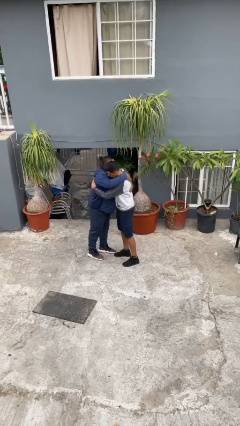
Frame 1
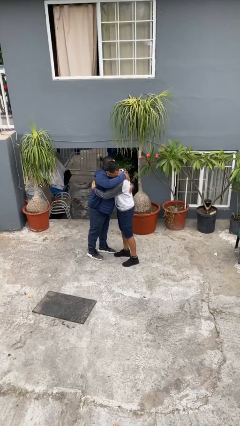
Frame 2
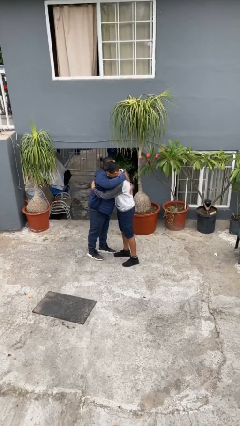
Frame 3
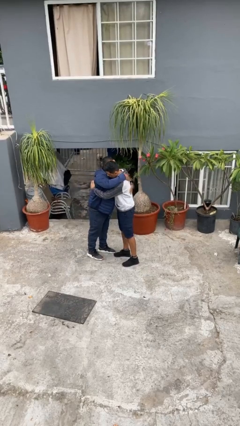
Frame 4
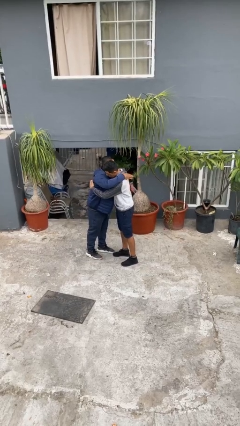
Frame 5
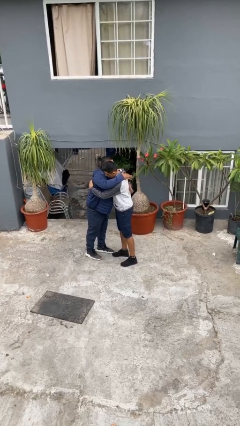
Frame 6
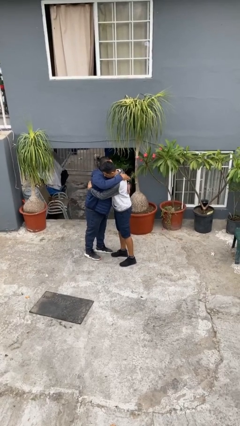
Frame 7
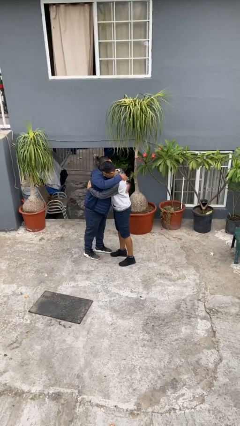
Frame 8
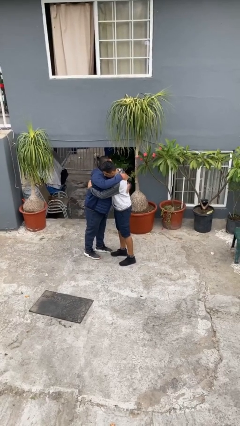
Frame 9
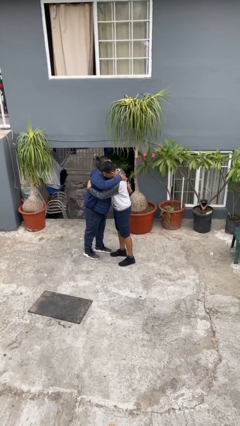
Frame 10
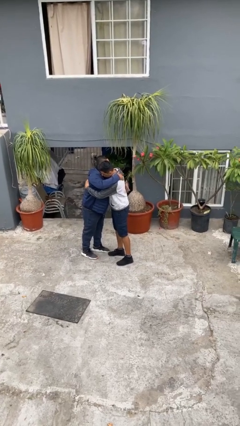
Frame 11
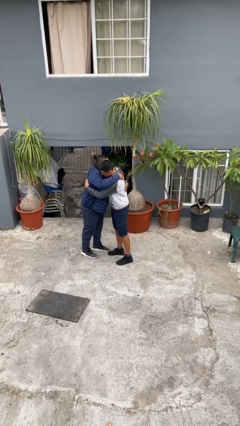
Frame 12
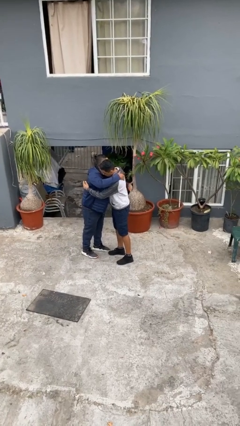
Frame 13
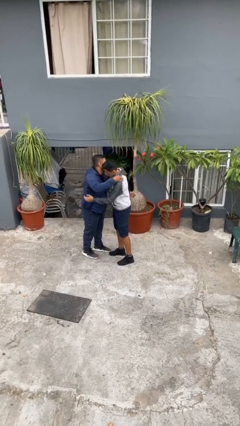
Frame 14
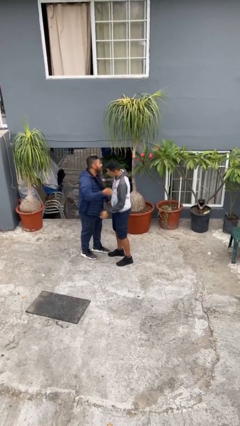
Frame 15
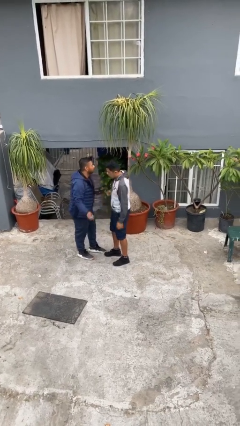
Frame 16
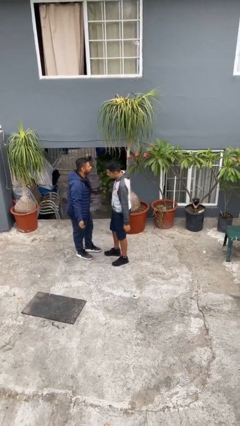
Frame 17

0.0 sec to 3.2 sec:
person embraces person

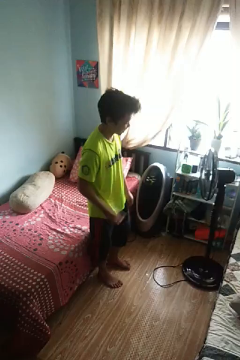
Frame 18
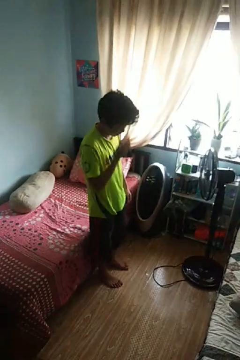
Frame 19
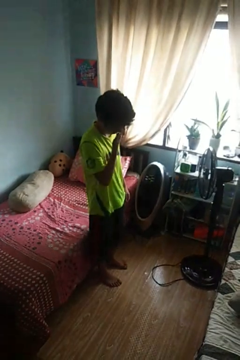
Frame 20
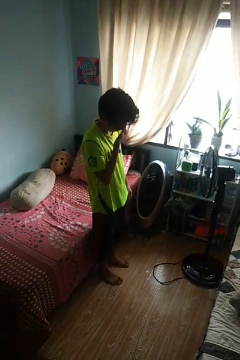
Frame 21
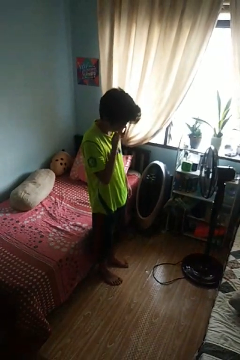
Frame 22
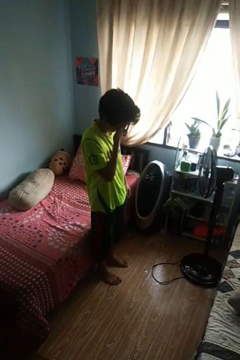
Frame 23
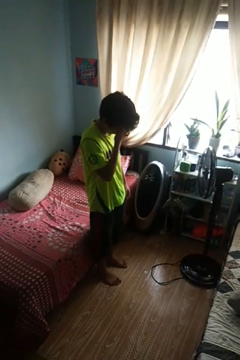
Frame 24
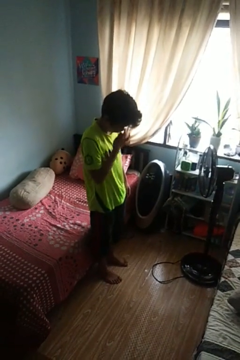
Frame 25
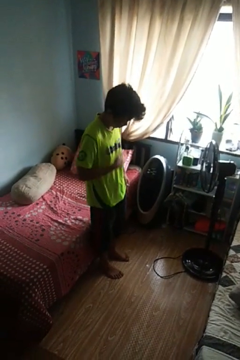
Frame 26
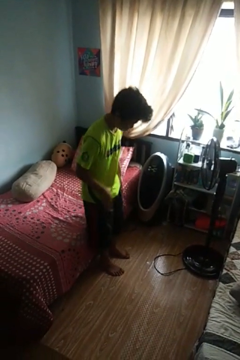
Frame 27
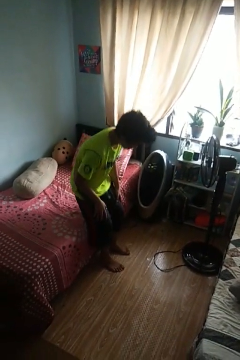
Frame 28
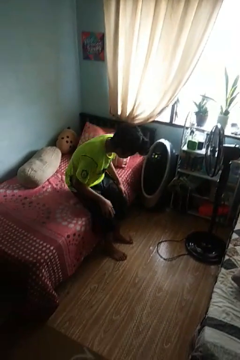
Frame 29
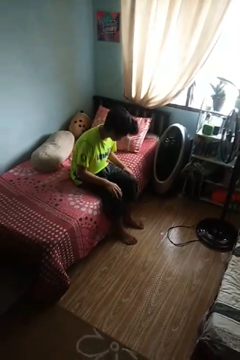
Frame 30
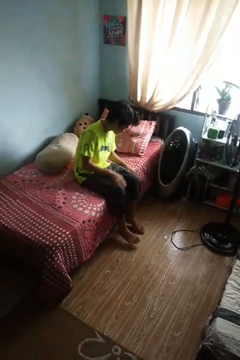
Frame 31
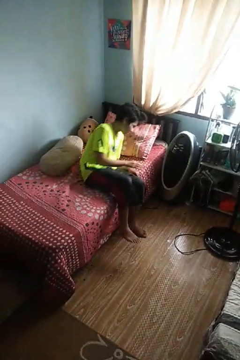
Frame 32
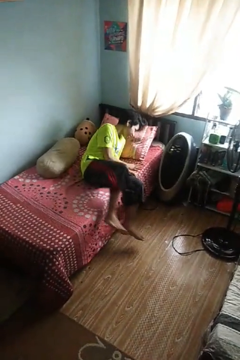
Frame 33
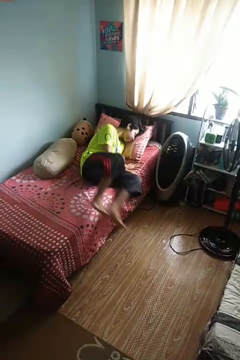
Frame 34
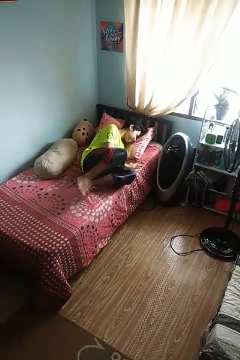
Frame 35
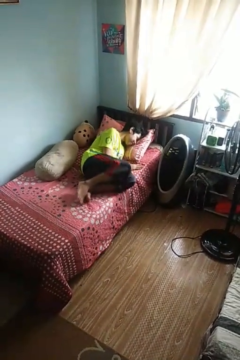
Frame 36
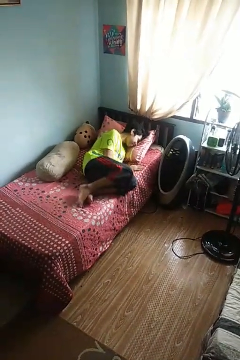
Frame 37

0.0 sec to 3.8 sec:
person lies down on bed

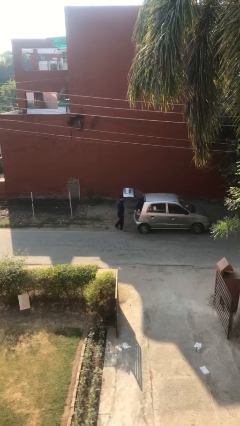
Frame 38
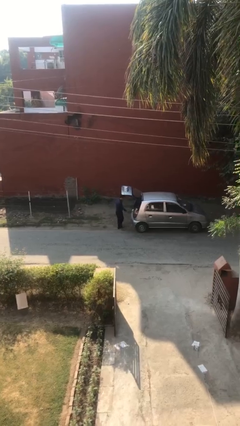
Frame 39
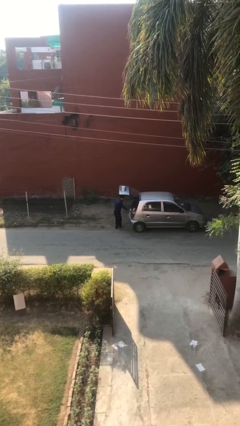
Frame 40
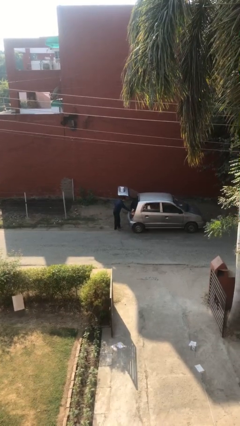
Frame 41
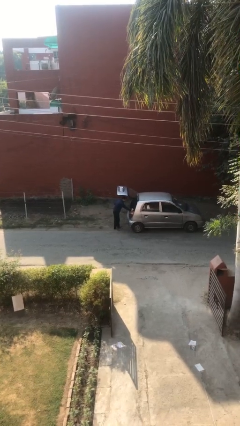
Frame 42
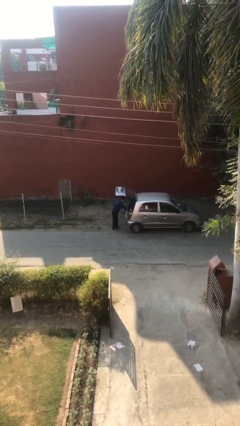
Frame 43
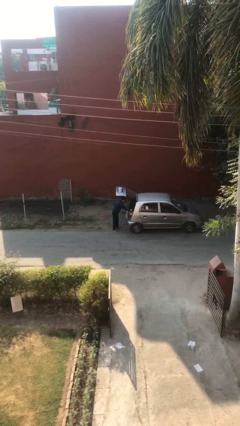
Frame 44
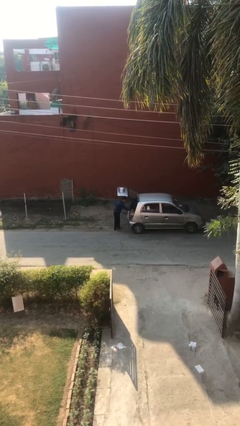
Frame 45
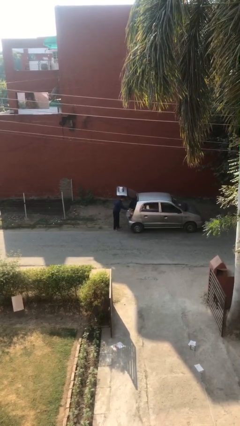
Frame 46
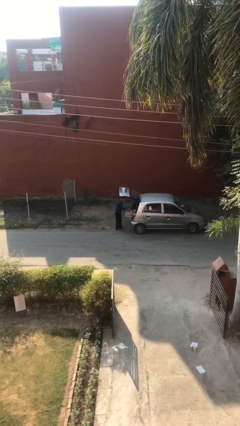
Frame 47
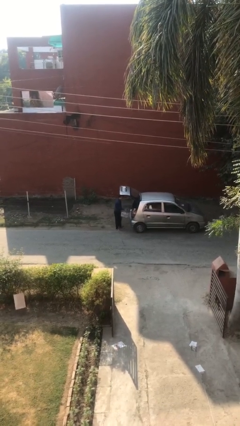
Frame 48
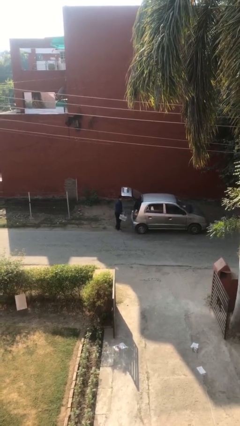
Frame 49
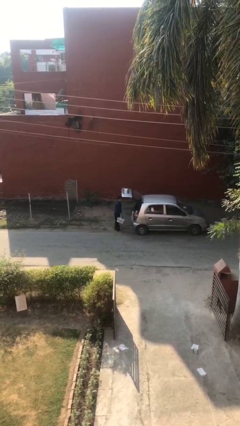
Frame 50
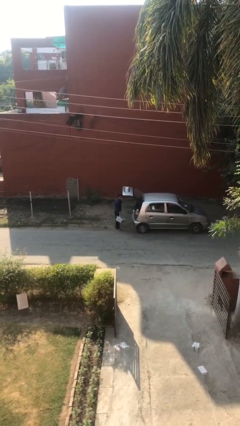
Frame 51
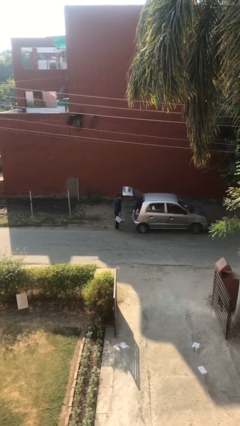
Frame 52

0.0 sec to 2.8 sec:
person unloads car

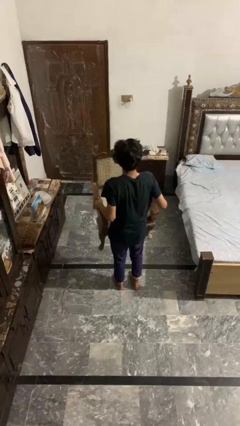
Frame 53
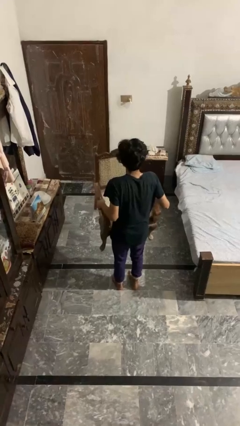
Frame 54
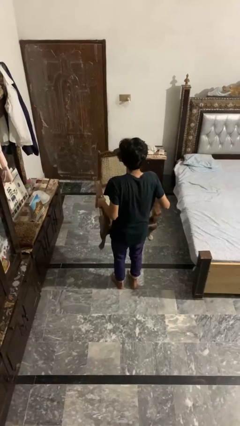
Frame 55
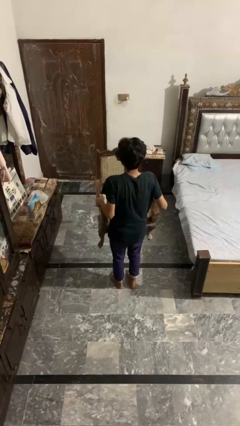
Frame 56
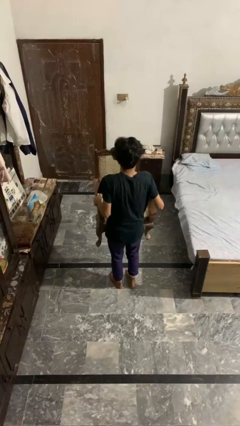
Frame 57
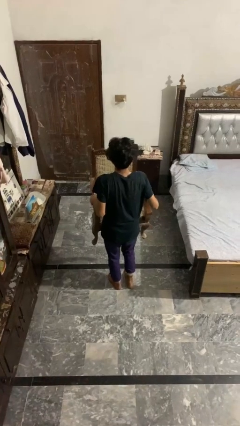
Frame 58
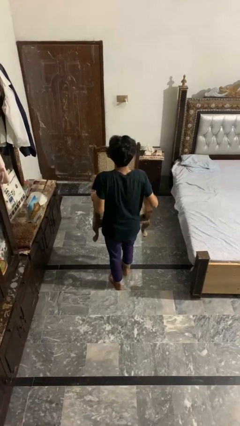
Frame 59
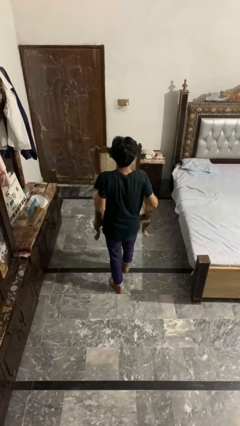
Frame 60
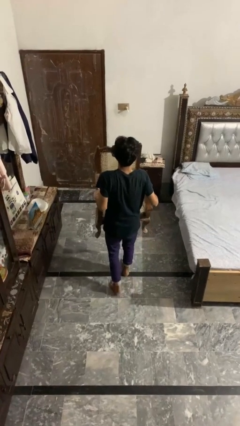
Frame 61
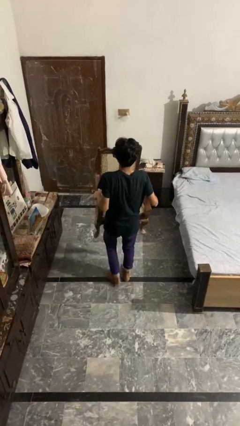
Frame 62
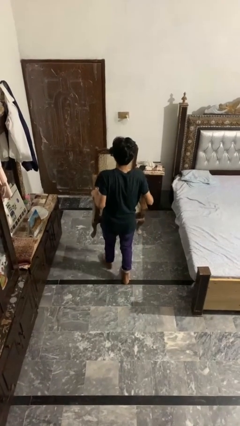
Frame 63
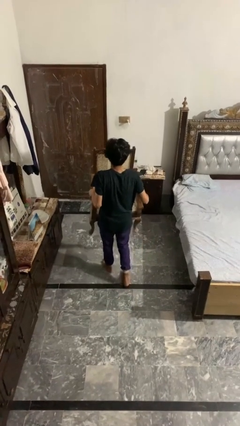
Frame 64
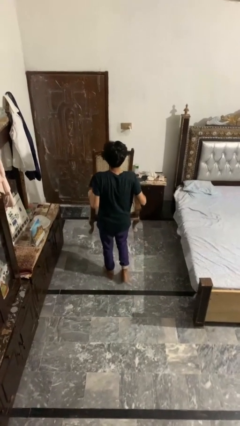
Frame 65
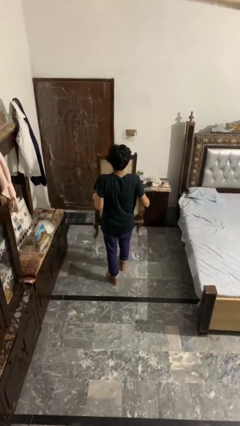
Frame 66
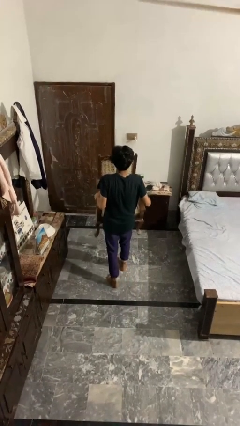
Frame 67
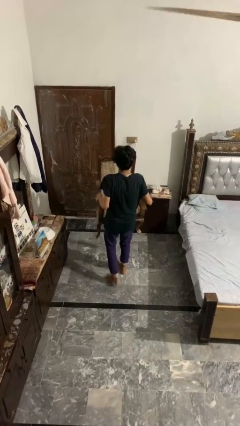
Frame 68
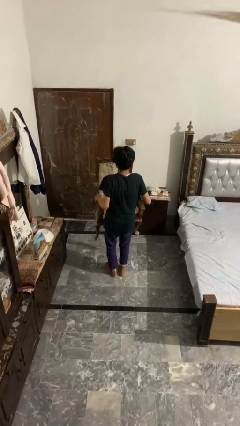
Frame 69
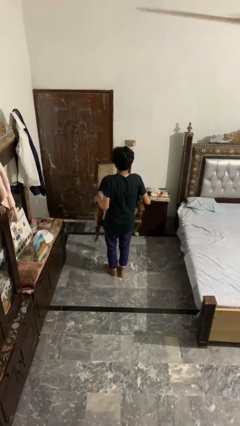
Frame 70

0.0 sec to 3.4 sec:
person carries furniture

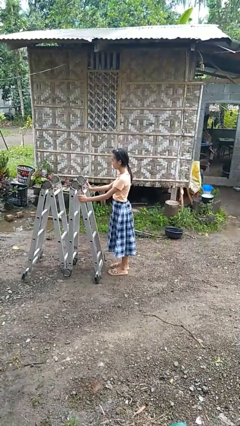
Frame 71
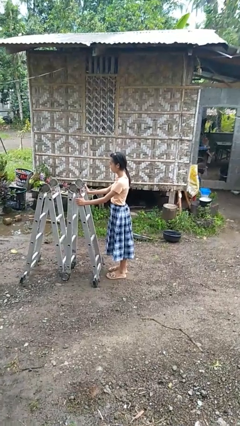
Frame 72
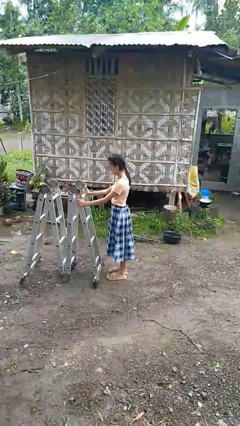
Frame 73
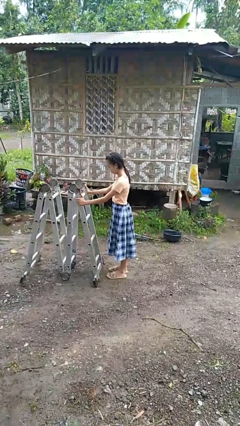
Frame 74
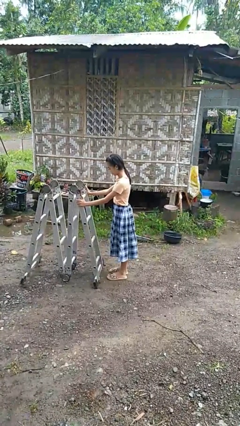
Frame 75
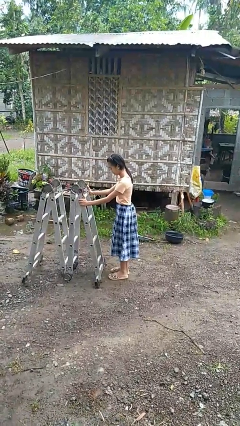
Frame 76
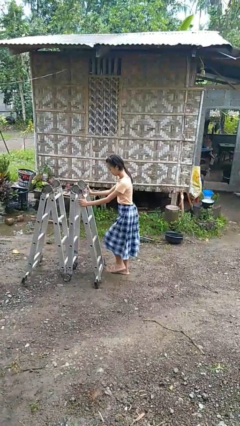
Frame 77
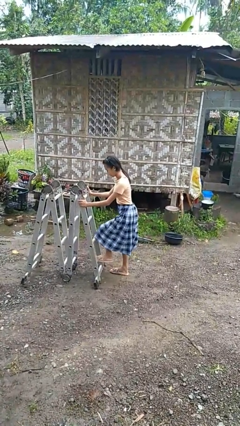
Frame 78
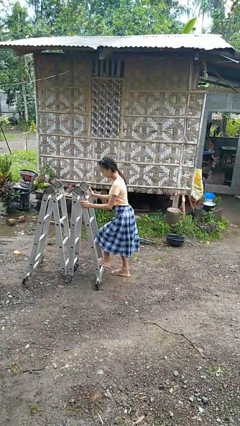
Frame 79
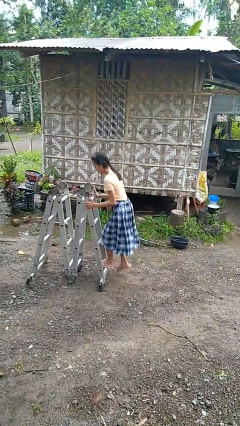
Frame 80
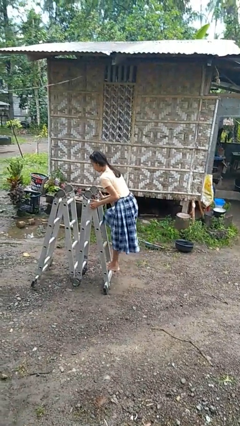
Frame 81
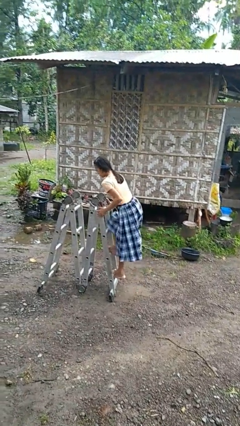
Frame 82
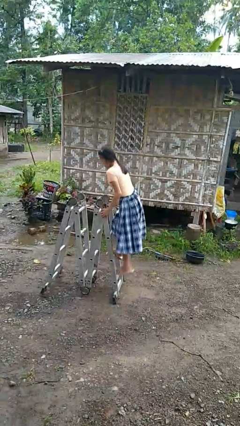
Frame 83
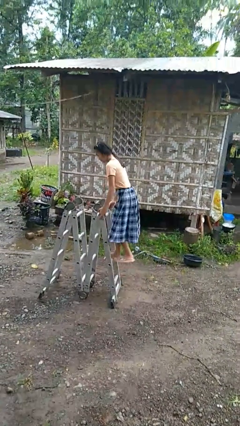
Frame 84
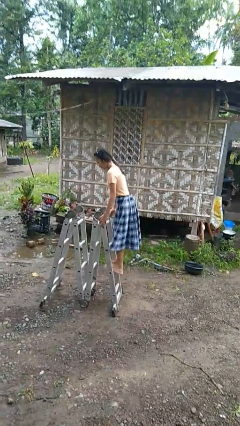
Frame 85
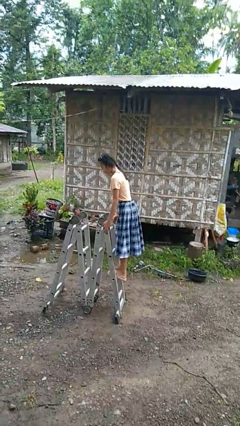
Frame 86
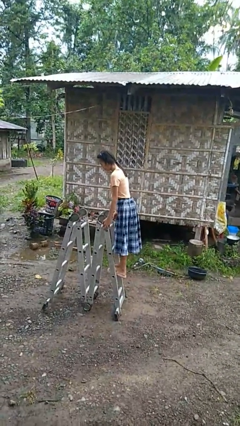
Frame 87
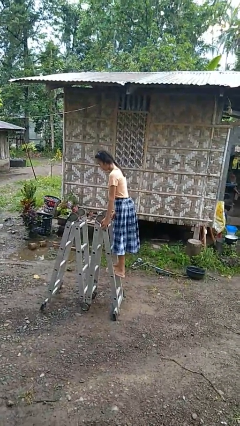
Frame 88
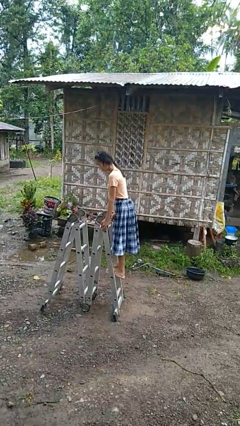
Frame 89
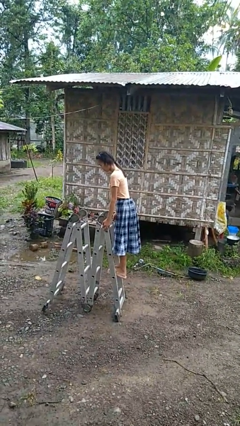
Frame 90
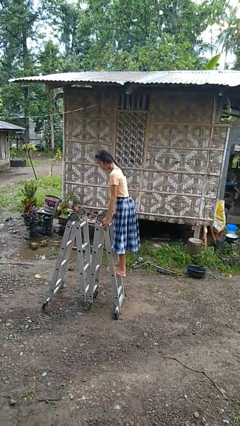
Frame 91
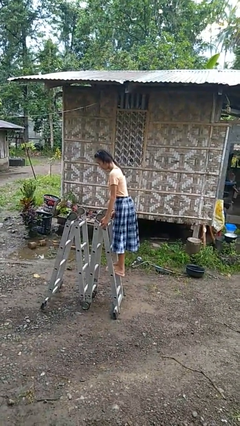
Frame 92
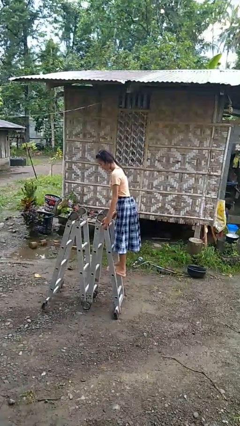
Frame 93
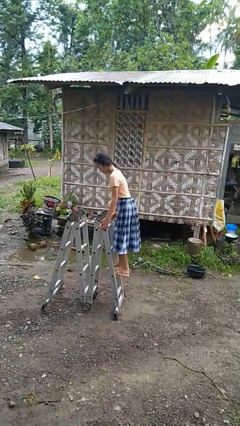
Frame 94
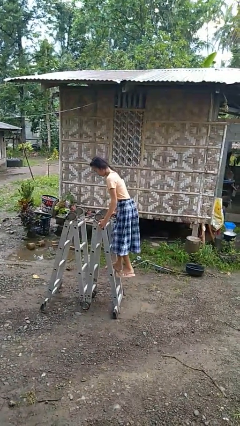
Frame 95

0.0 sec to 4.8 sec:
person climbs up ladder

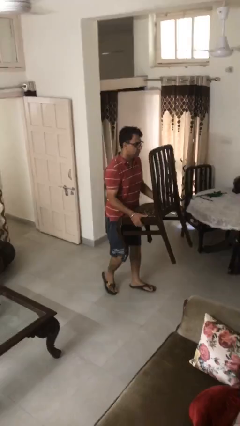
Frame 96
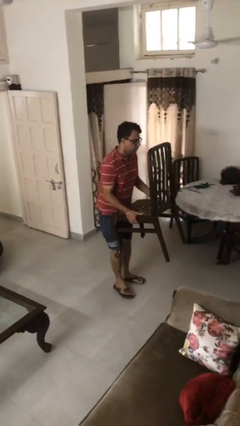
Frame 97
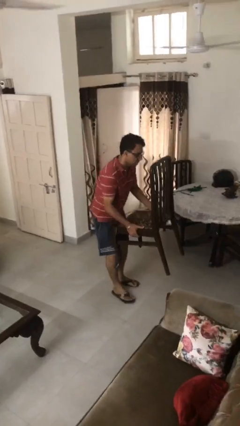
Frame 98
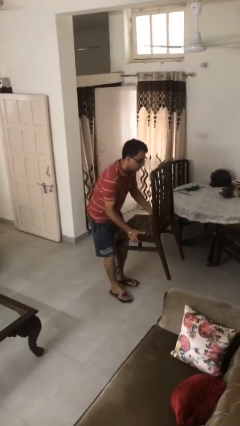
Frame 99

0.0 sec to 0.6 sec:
person puts down object on floor
